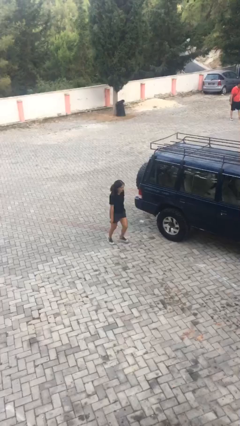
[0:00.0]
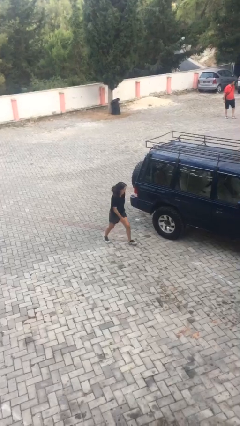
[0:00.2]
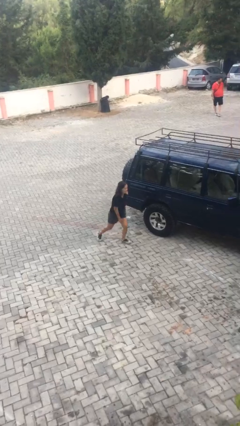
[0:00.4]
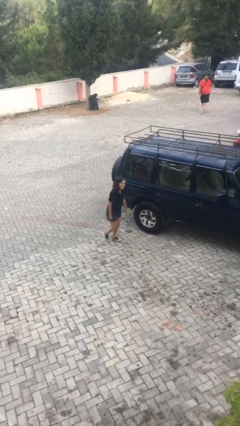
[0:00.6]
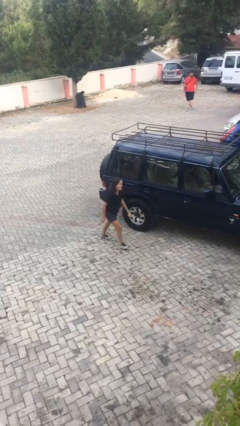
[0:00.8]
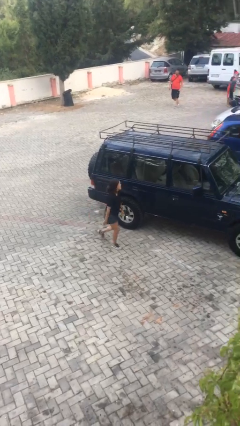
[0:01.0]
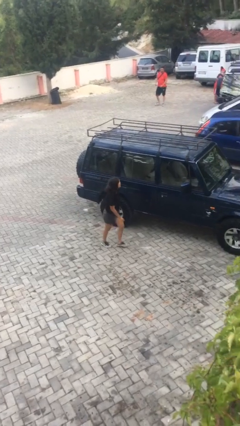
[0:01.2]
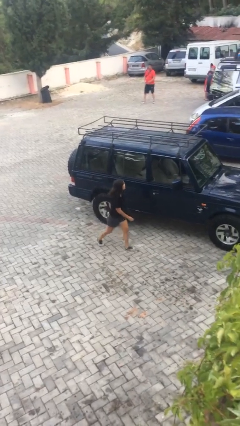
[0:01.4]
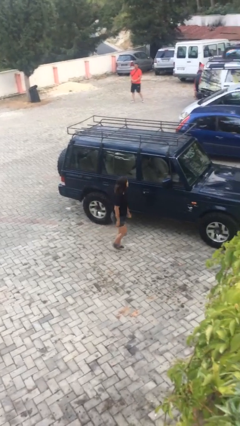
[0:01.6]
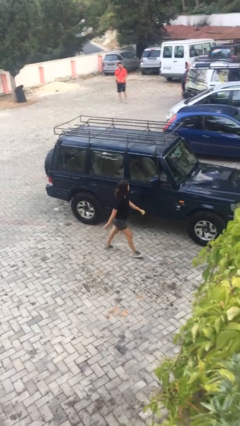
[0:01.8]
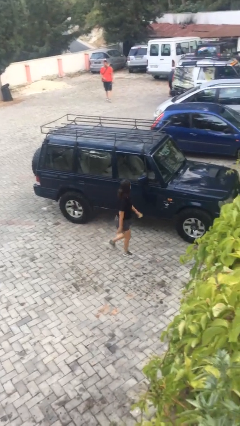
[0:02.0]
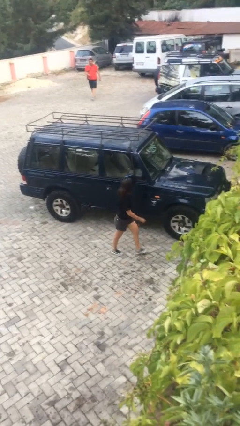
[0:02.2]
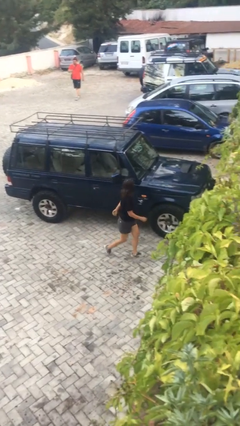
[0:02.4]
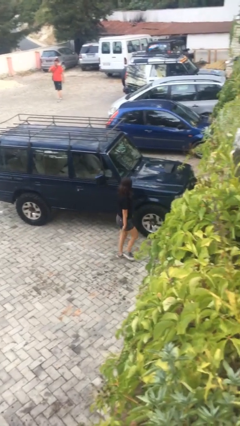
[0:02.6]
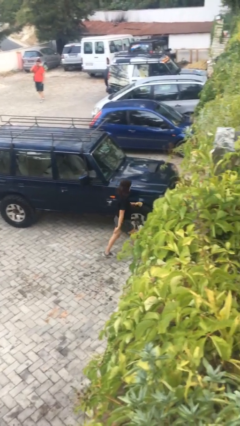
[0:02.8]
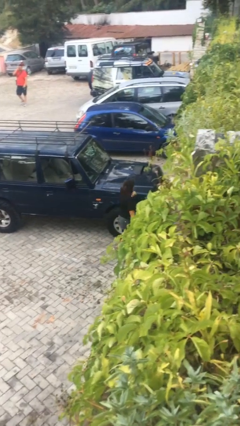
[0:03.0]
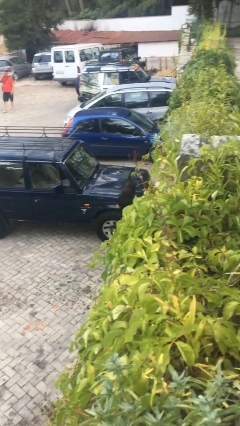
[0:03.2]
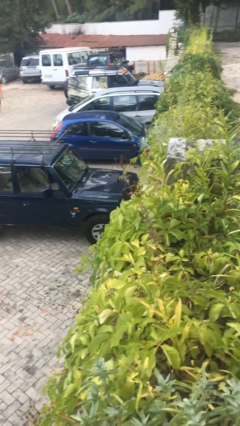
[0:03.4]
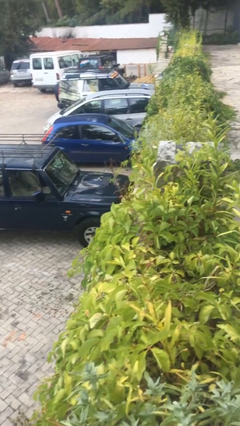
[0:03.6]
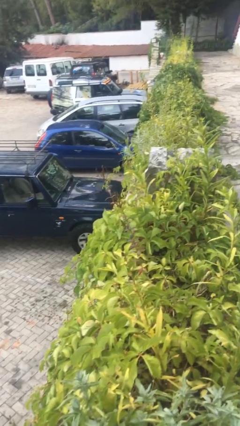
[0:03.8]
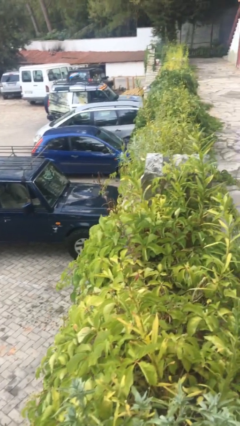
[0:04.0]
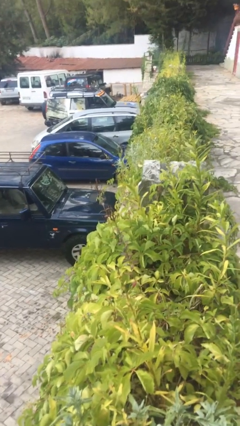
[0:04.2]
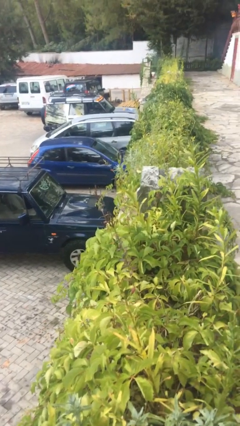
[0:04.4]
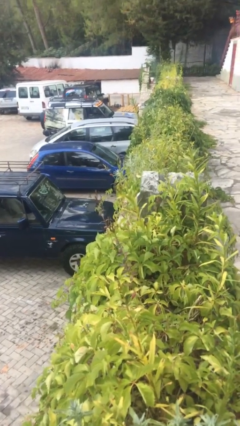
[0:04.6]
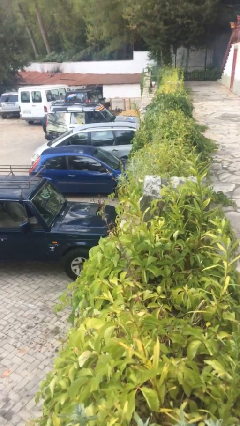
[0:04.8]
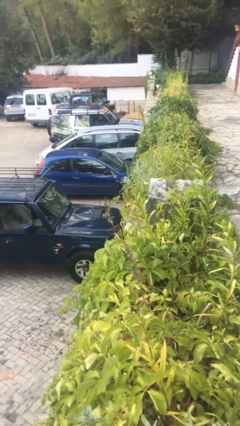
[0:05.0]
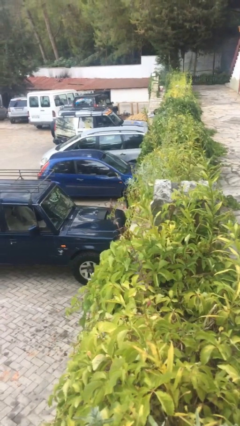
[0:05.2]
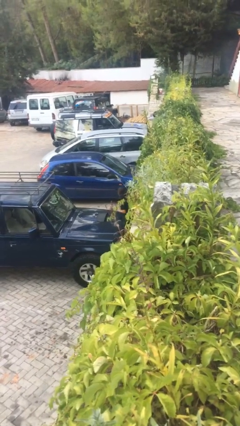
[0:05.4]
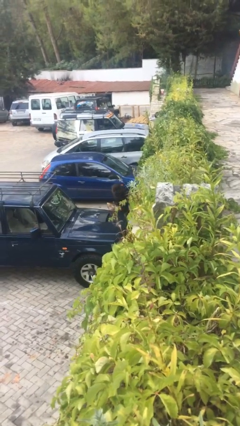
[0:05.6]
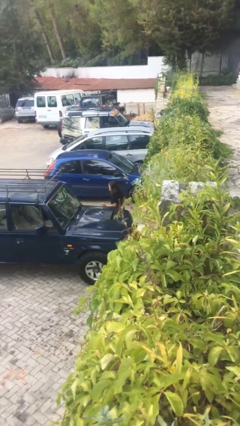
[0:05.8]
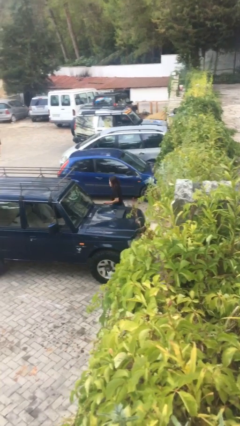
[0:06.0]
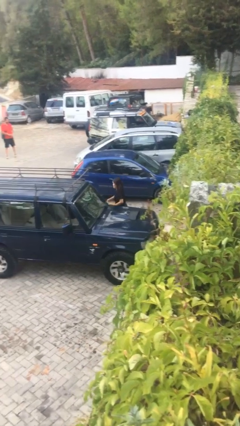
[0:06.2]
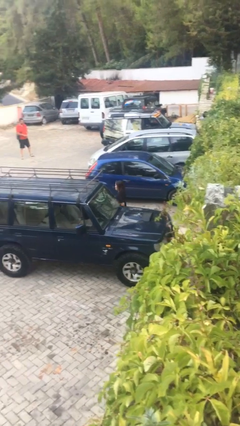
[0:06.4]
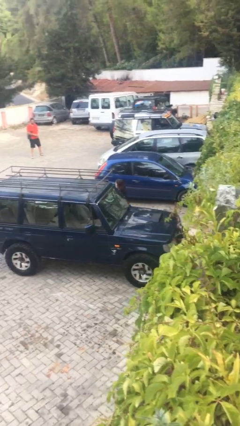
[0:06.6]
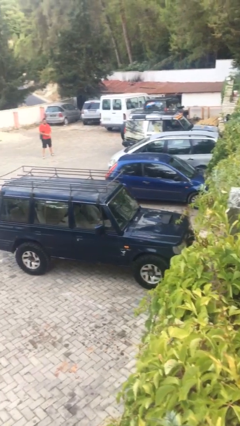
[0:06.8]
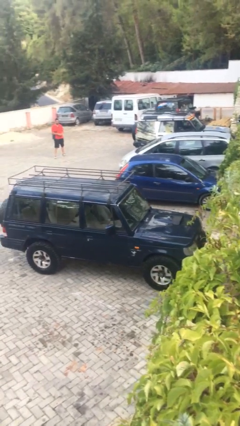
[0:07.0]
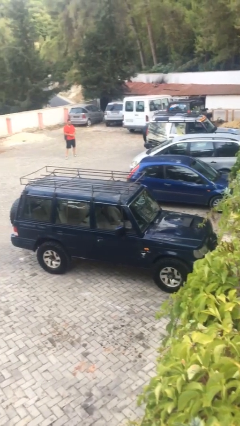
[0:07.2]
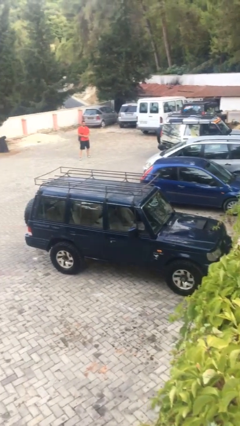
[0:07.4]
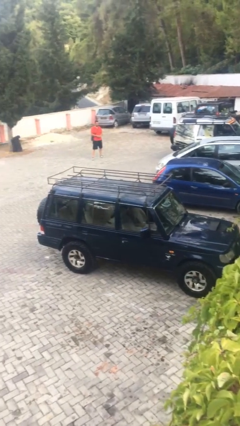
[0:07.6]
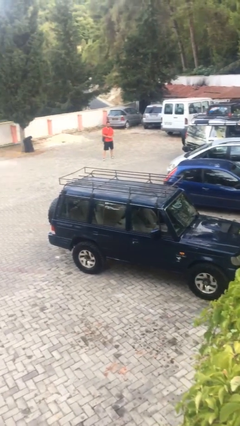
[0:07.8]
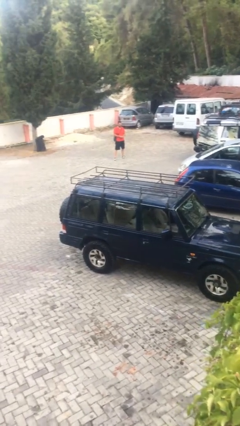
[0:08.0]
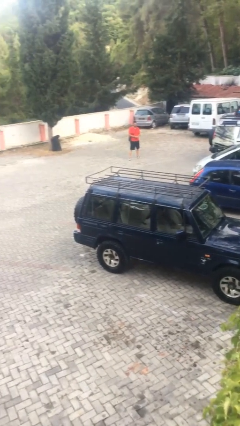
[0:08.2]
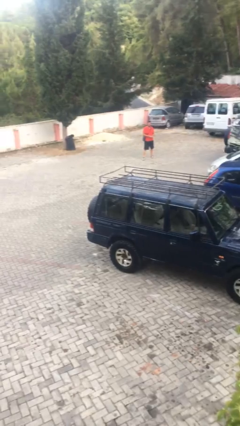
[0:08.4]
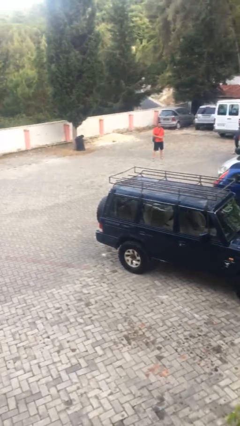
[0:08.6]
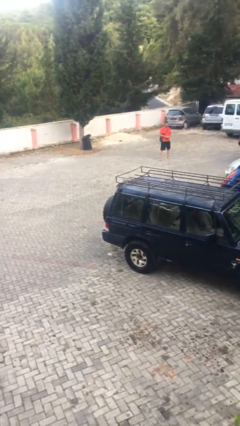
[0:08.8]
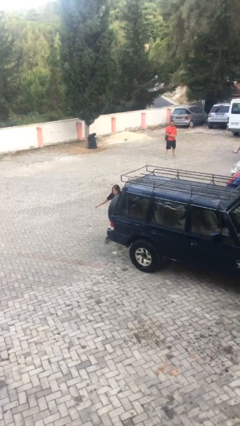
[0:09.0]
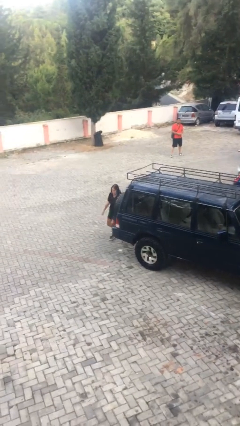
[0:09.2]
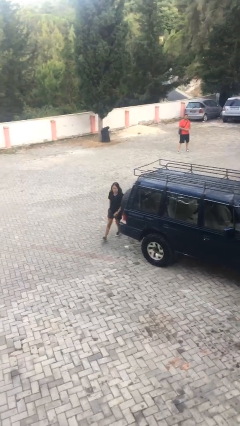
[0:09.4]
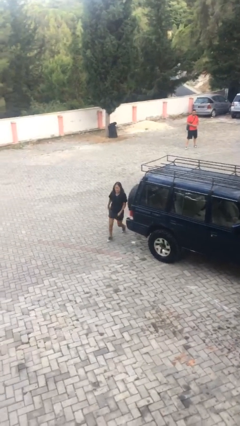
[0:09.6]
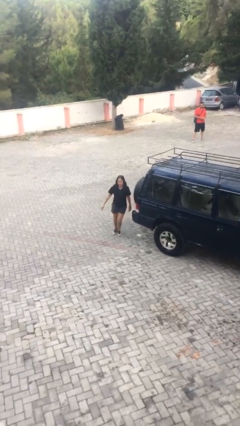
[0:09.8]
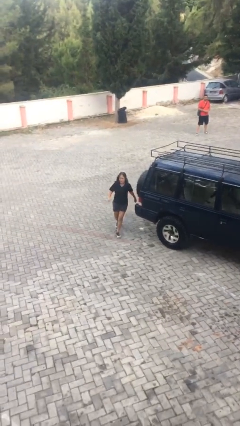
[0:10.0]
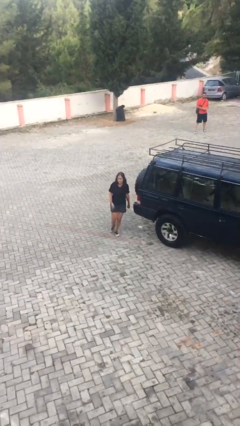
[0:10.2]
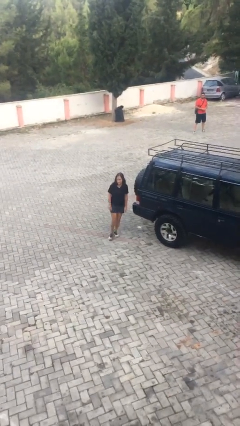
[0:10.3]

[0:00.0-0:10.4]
person walks around car

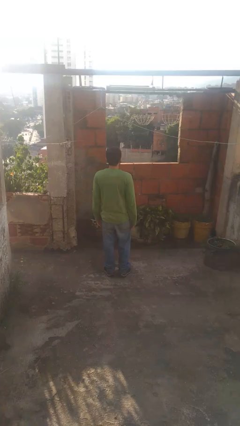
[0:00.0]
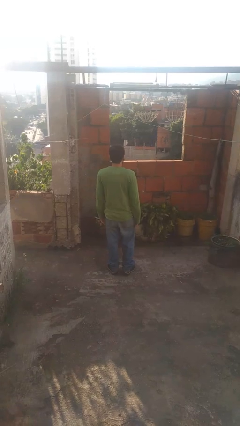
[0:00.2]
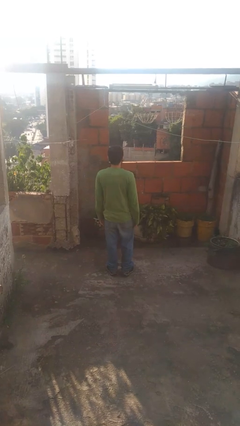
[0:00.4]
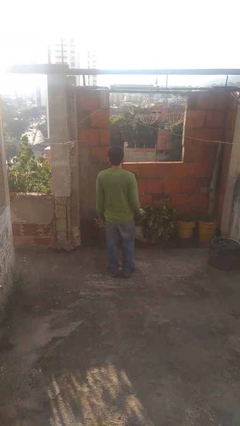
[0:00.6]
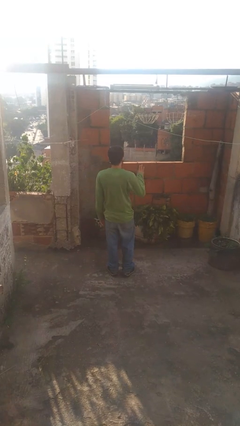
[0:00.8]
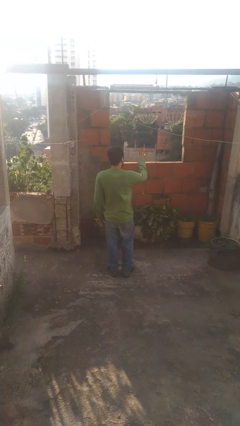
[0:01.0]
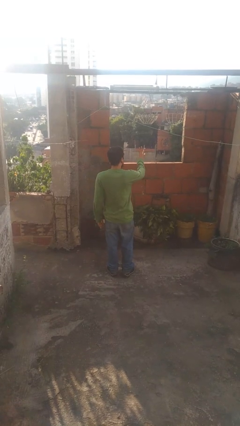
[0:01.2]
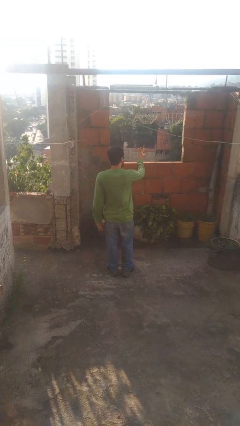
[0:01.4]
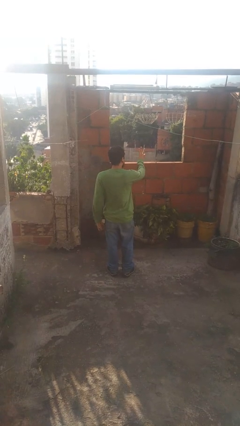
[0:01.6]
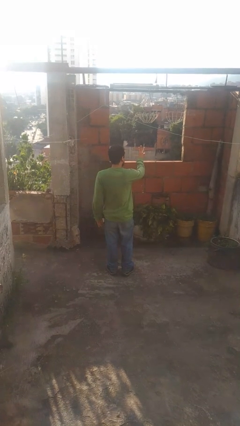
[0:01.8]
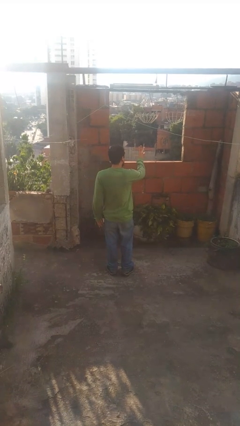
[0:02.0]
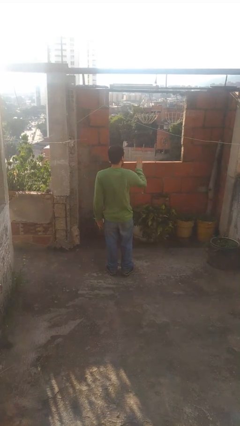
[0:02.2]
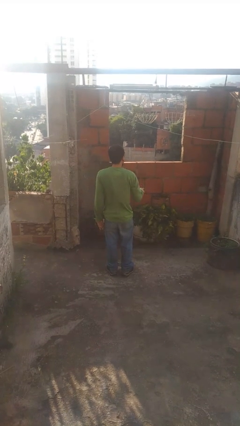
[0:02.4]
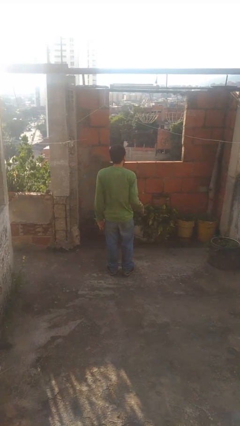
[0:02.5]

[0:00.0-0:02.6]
person gestures number three

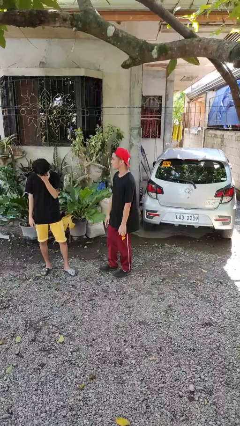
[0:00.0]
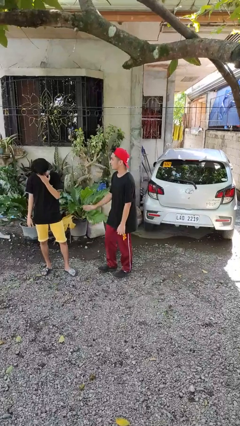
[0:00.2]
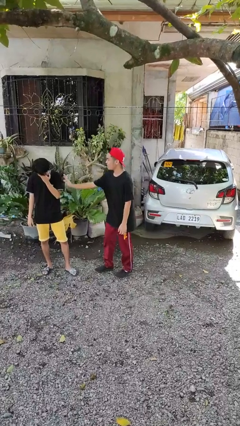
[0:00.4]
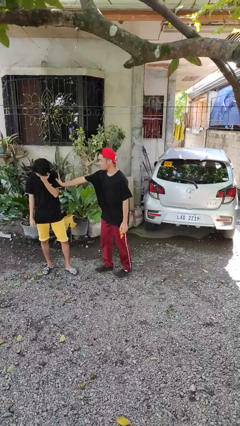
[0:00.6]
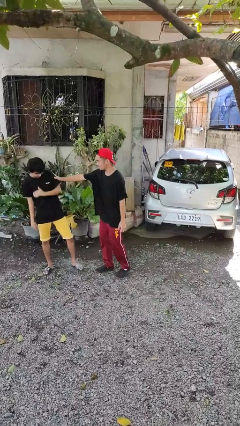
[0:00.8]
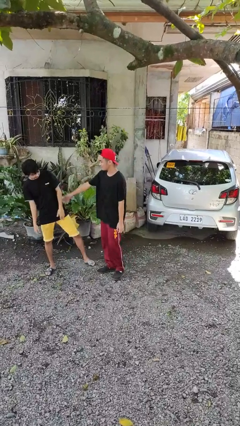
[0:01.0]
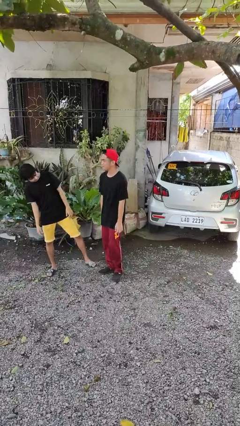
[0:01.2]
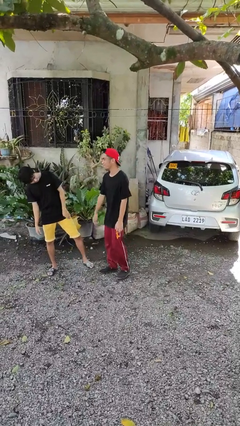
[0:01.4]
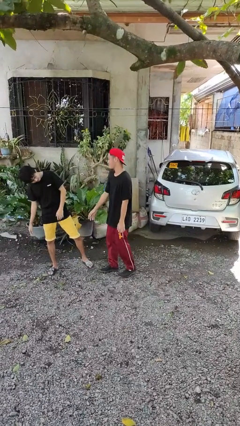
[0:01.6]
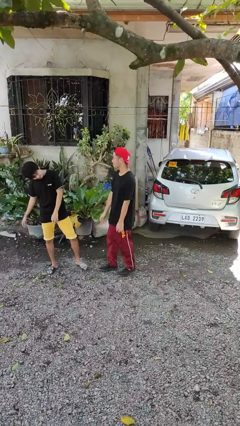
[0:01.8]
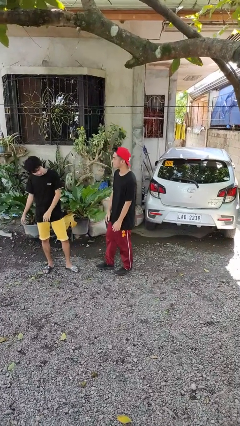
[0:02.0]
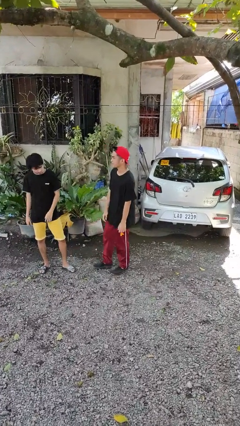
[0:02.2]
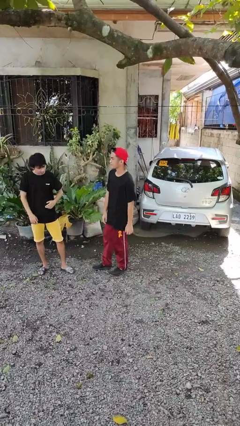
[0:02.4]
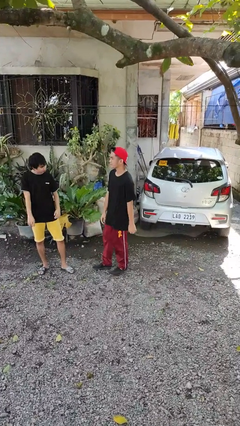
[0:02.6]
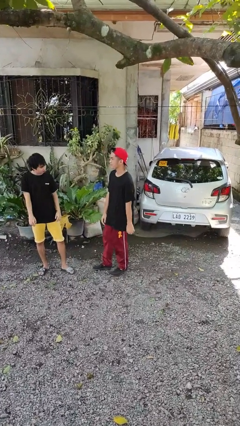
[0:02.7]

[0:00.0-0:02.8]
person shoves person

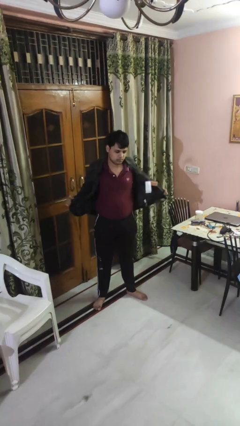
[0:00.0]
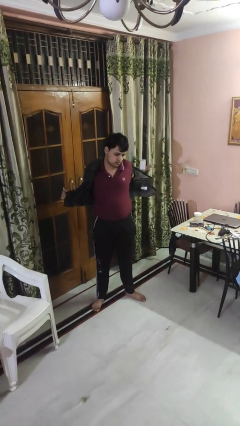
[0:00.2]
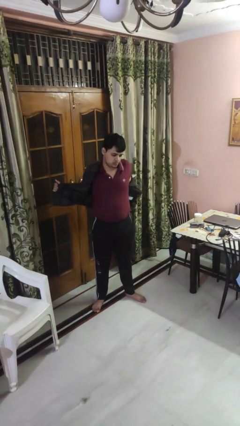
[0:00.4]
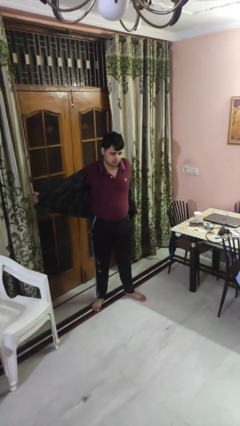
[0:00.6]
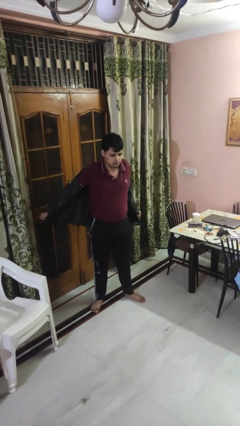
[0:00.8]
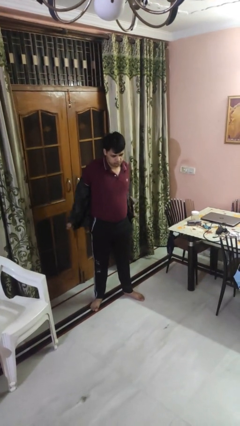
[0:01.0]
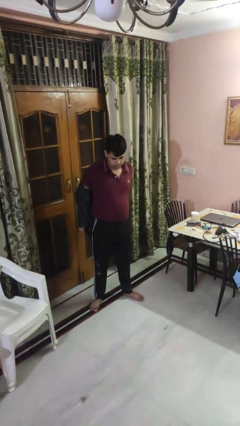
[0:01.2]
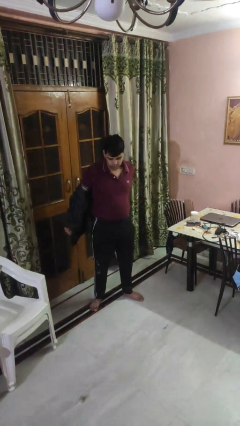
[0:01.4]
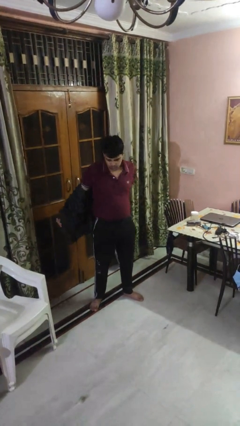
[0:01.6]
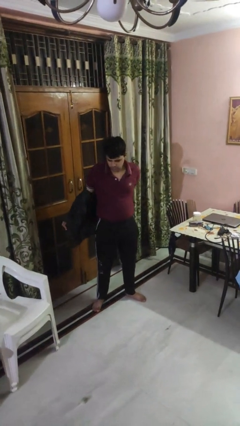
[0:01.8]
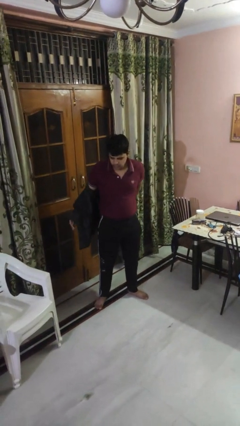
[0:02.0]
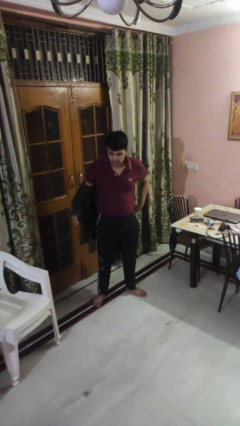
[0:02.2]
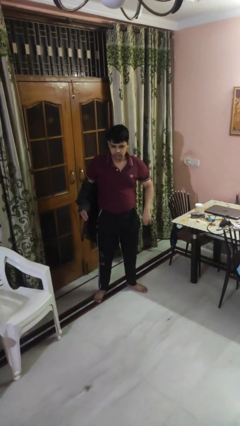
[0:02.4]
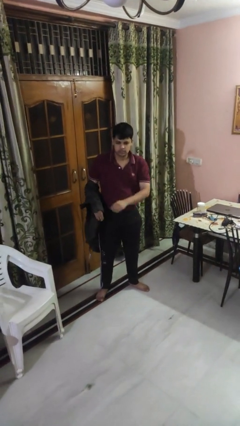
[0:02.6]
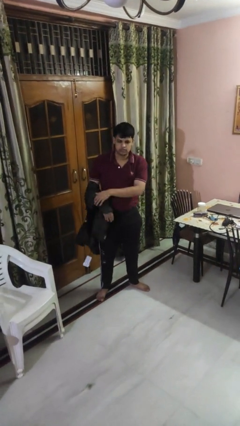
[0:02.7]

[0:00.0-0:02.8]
person takes off shirt
